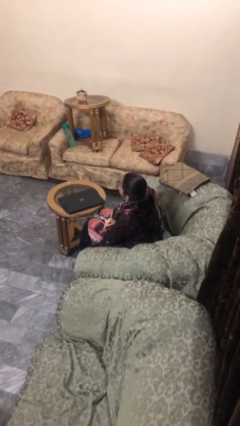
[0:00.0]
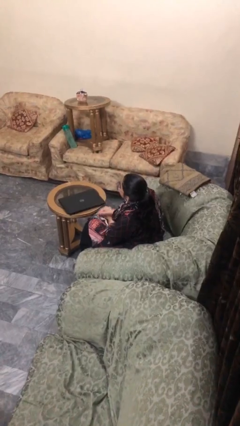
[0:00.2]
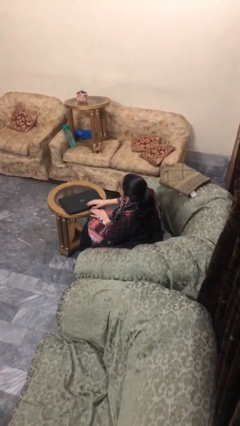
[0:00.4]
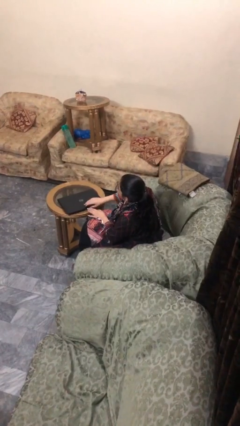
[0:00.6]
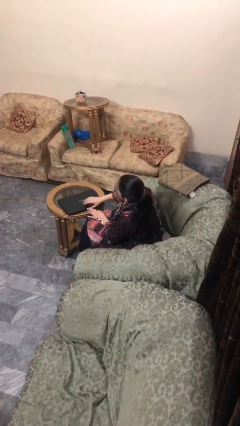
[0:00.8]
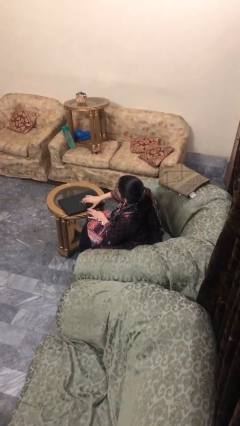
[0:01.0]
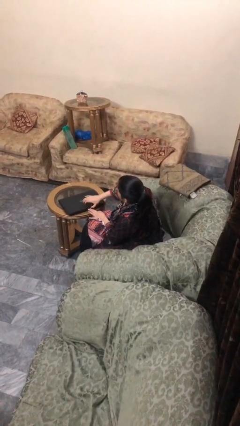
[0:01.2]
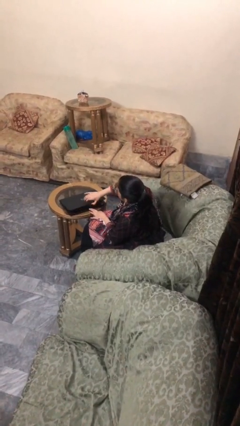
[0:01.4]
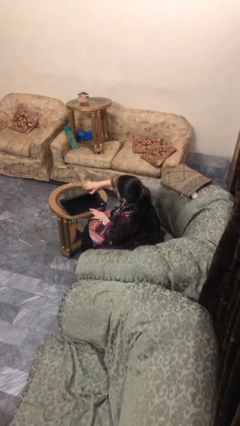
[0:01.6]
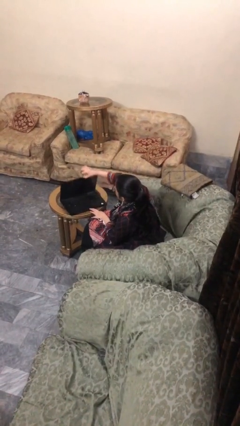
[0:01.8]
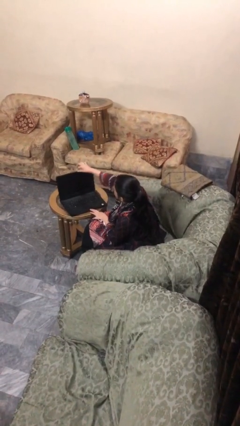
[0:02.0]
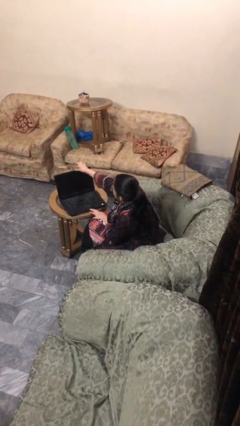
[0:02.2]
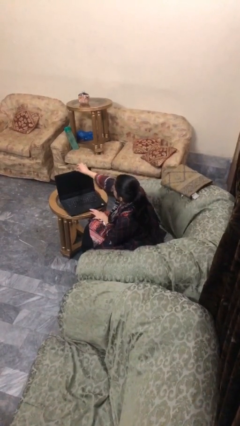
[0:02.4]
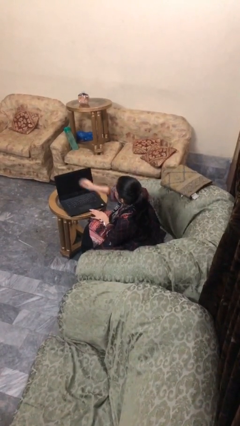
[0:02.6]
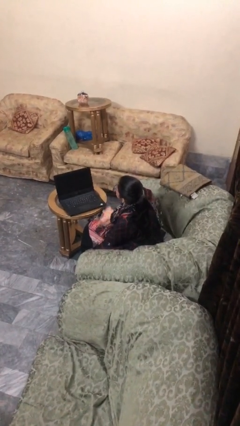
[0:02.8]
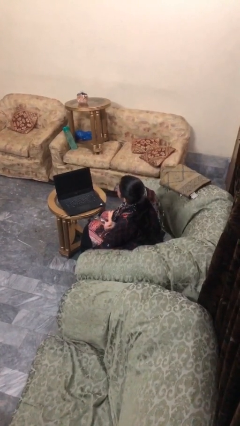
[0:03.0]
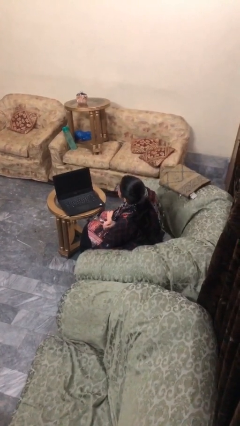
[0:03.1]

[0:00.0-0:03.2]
person opens laptop

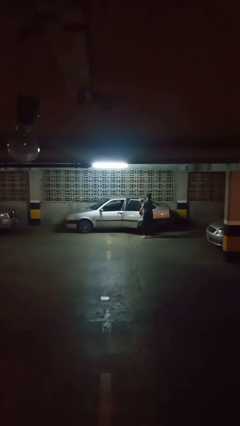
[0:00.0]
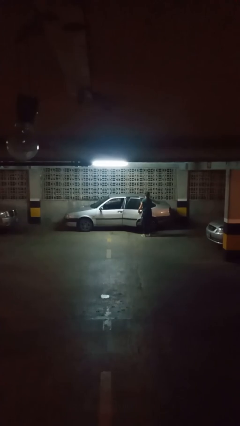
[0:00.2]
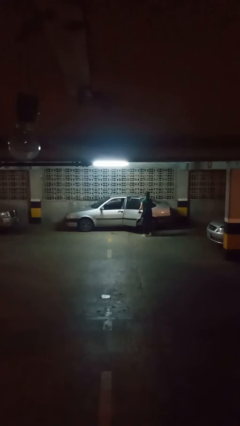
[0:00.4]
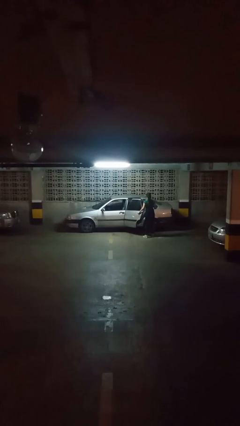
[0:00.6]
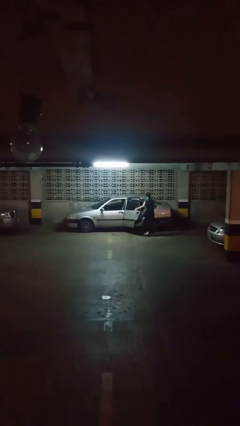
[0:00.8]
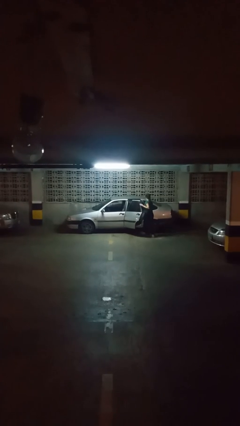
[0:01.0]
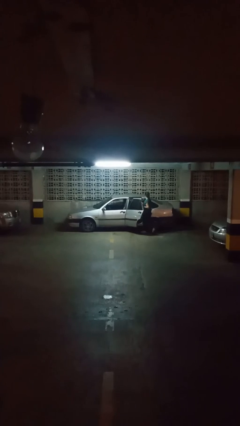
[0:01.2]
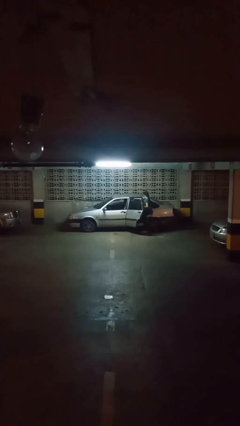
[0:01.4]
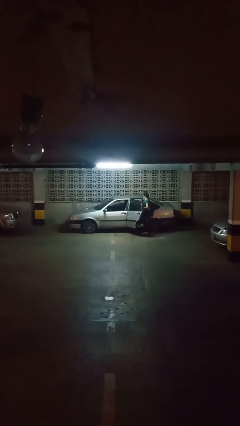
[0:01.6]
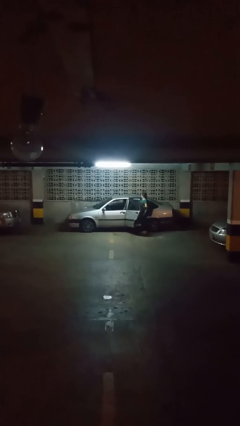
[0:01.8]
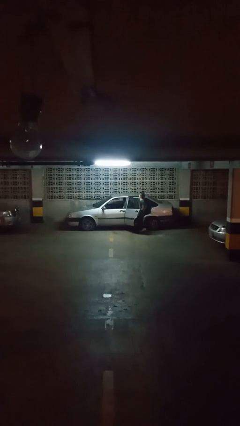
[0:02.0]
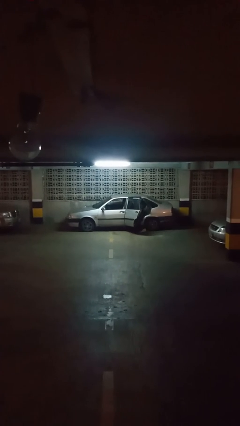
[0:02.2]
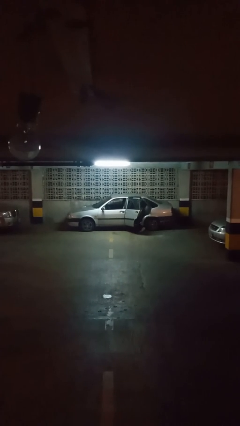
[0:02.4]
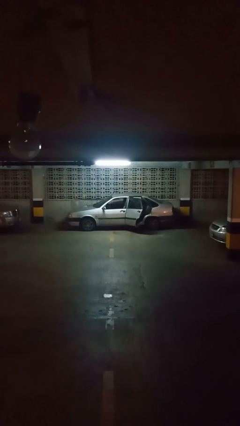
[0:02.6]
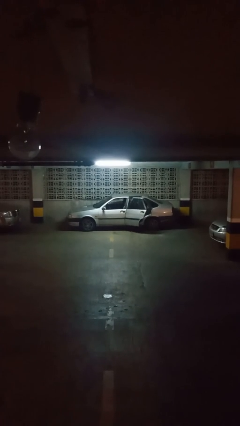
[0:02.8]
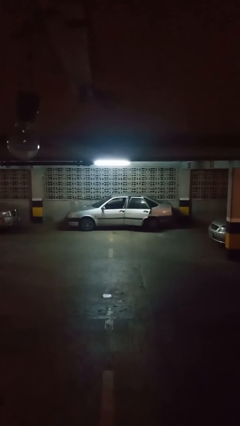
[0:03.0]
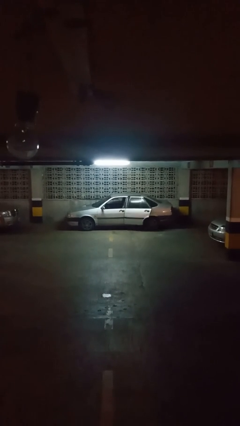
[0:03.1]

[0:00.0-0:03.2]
car picks up person

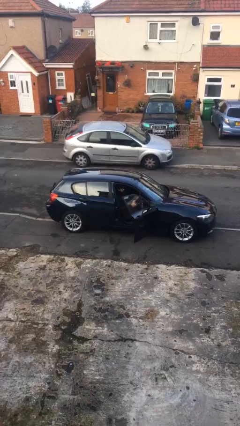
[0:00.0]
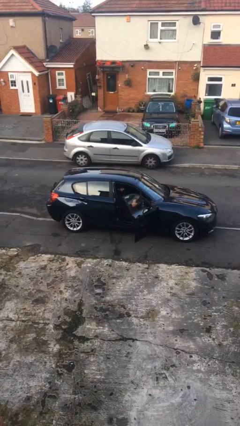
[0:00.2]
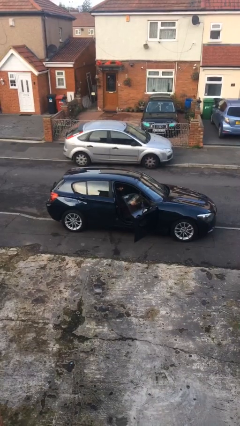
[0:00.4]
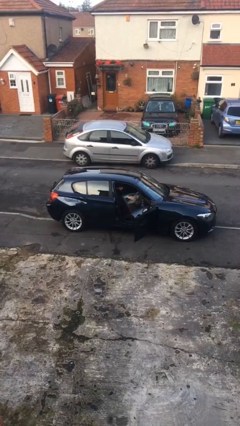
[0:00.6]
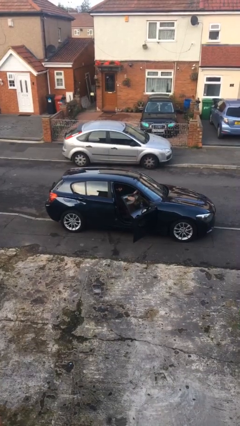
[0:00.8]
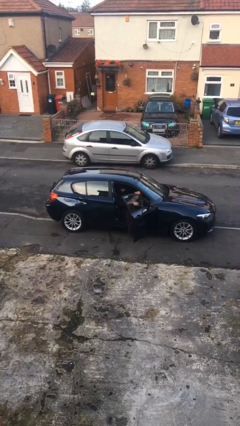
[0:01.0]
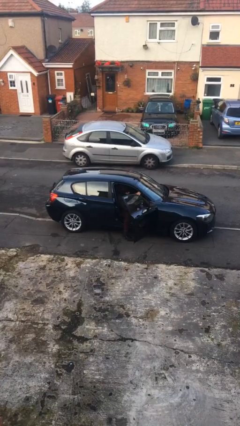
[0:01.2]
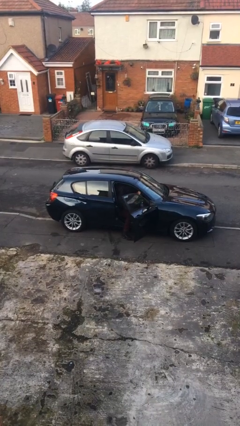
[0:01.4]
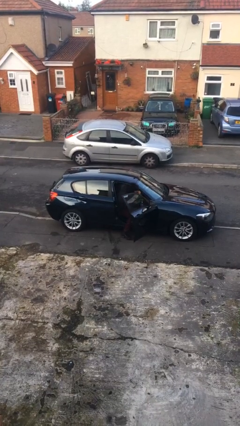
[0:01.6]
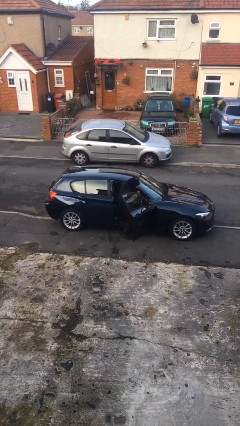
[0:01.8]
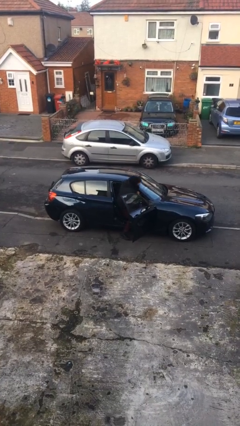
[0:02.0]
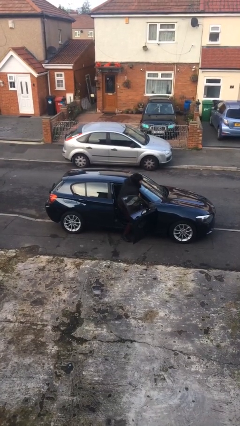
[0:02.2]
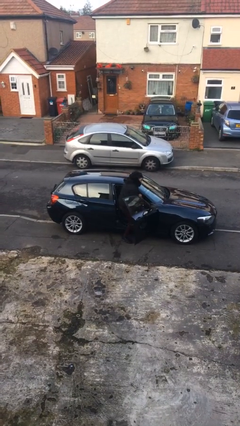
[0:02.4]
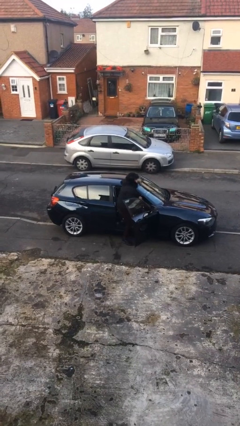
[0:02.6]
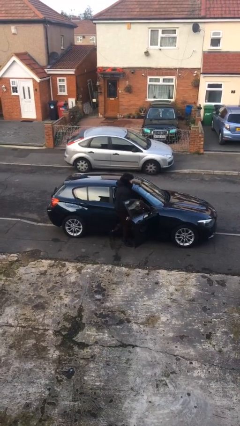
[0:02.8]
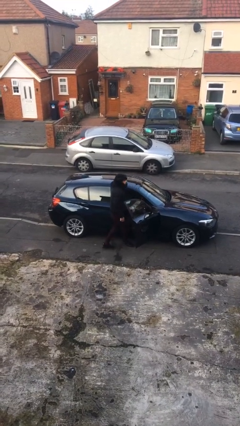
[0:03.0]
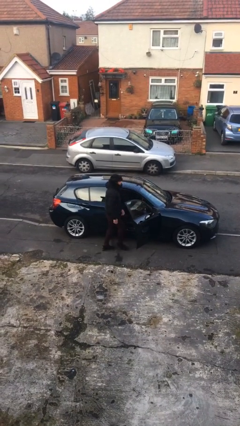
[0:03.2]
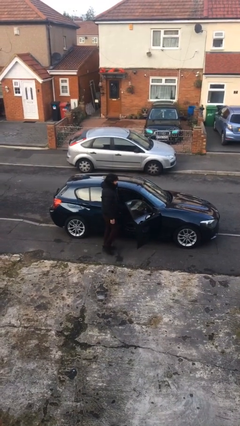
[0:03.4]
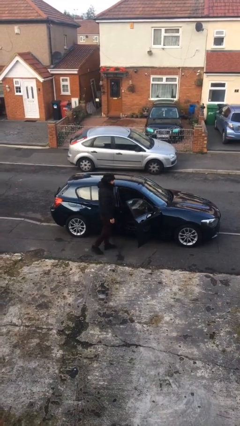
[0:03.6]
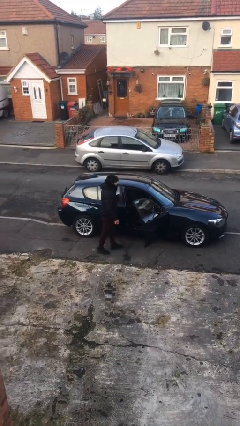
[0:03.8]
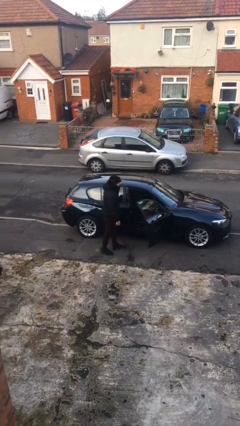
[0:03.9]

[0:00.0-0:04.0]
person exits car

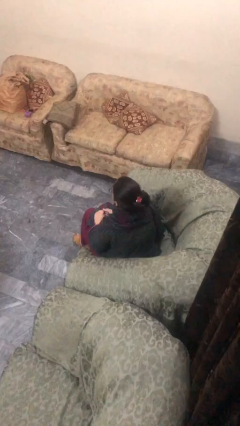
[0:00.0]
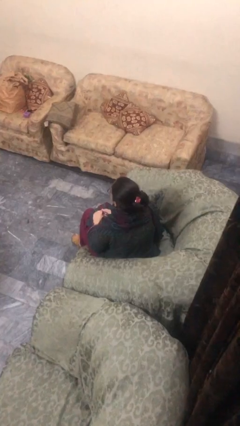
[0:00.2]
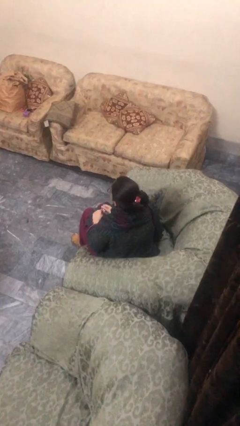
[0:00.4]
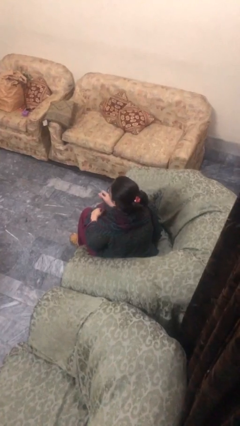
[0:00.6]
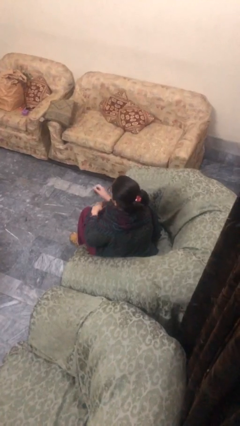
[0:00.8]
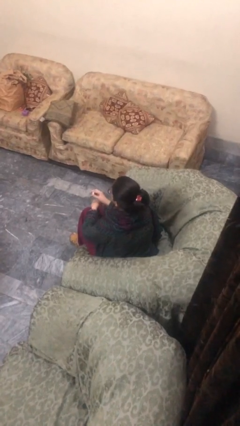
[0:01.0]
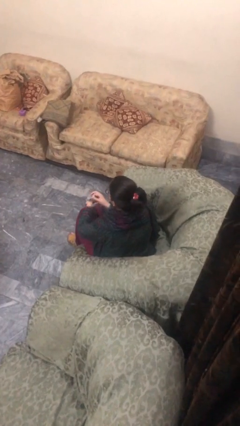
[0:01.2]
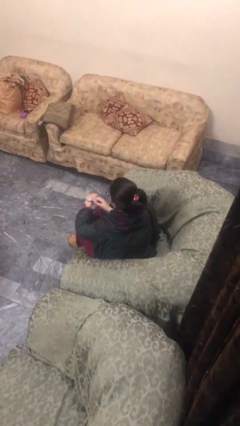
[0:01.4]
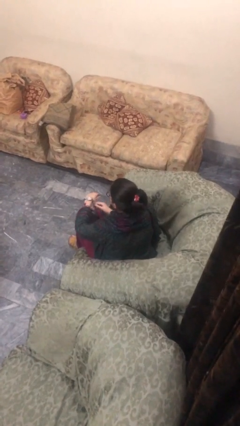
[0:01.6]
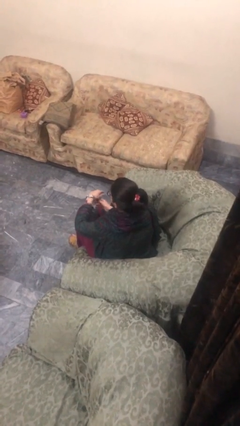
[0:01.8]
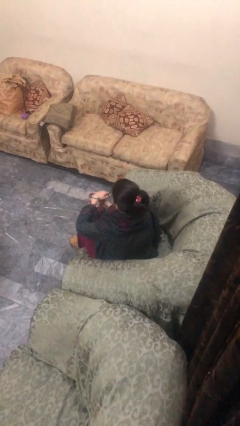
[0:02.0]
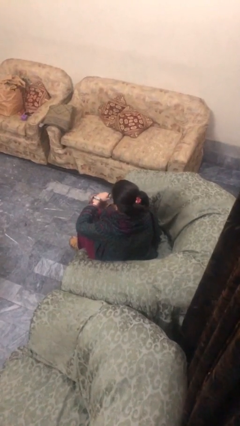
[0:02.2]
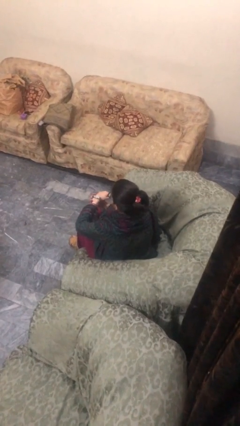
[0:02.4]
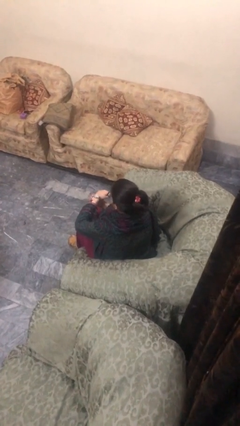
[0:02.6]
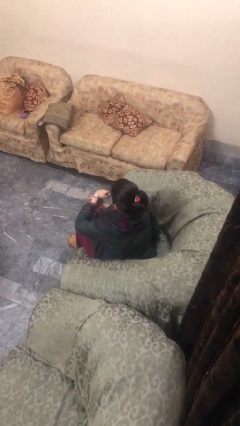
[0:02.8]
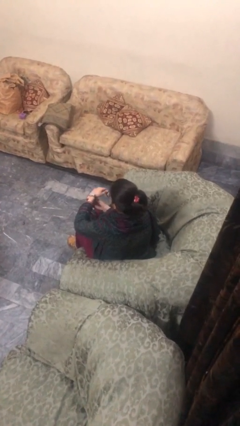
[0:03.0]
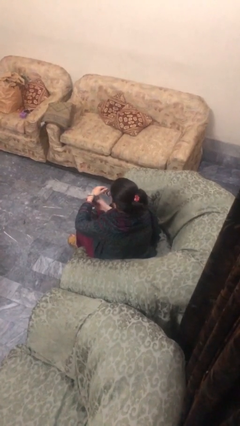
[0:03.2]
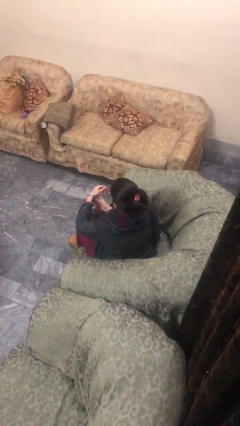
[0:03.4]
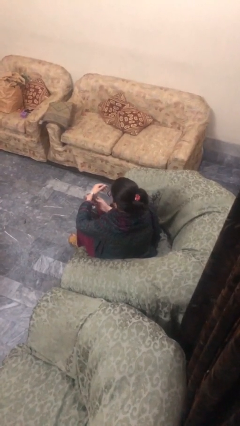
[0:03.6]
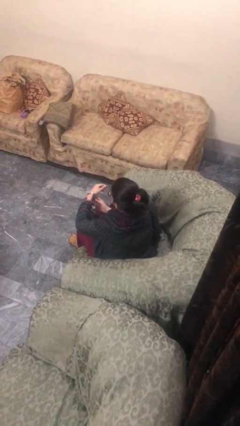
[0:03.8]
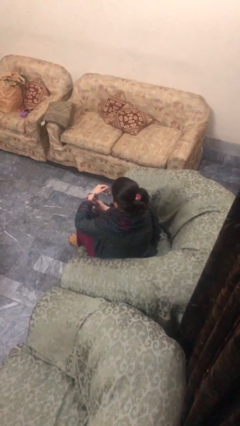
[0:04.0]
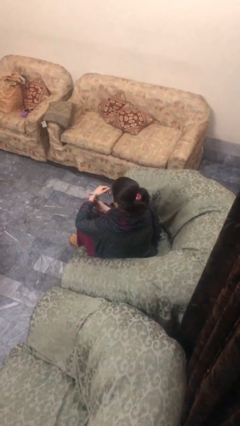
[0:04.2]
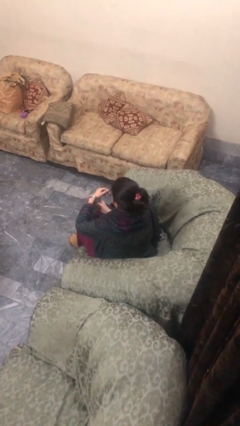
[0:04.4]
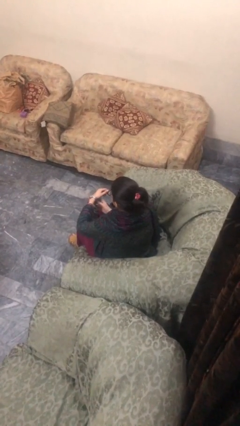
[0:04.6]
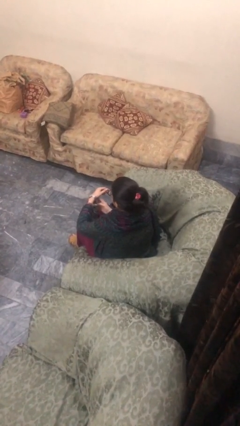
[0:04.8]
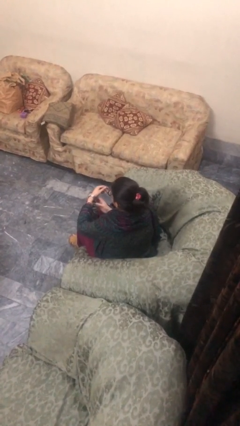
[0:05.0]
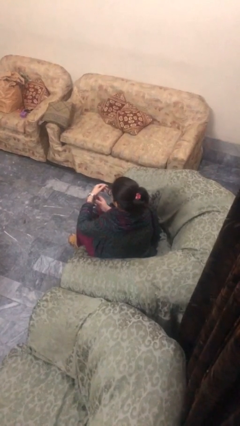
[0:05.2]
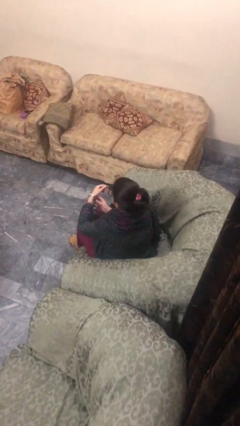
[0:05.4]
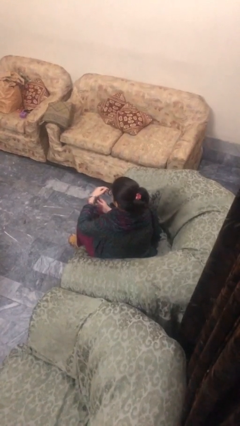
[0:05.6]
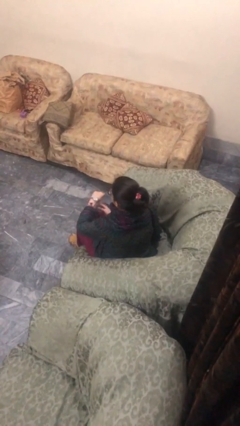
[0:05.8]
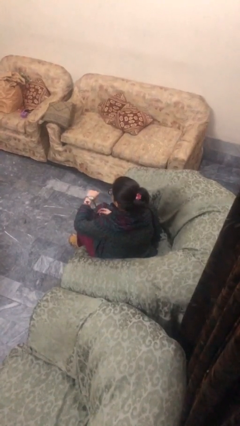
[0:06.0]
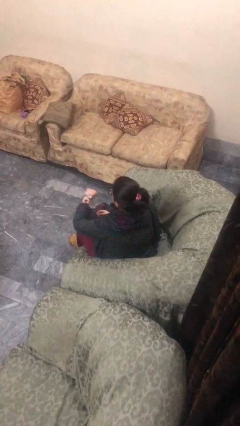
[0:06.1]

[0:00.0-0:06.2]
person puts on wristwatch

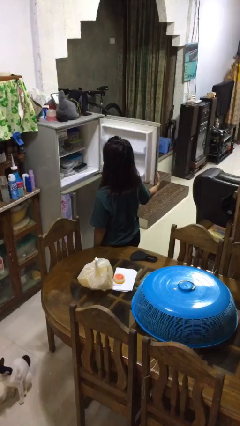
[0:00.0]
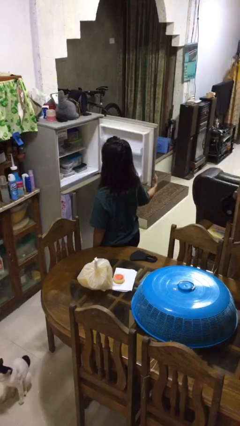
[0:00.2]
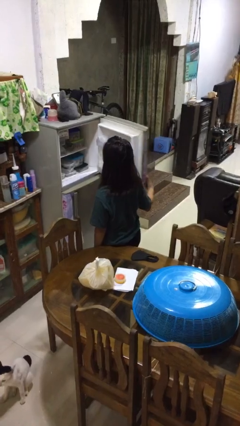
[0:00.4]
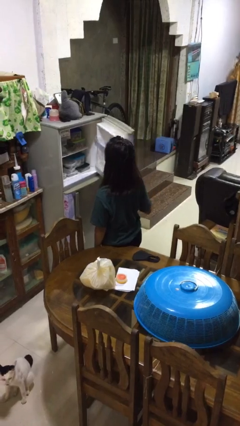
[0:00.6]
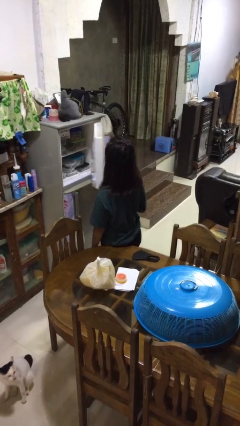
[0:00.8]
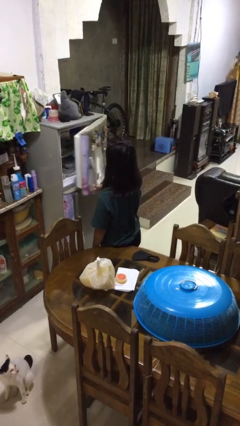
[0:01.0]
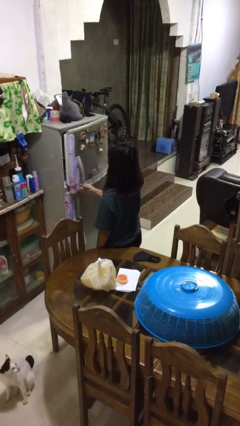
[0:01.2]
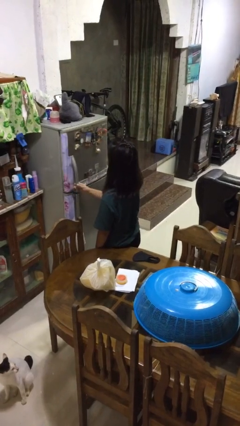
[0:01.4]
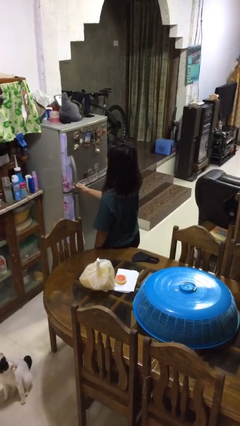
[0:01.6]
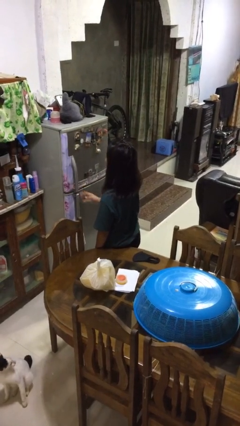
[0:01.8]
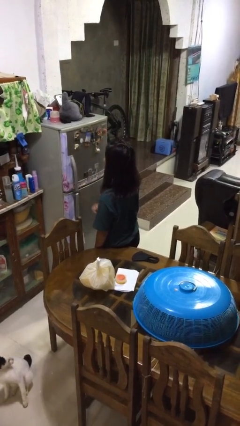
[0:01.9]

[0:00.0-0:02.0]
person closes refrigerator
